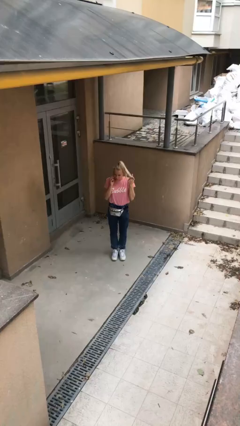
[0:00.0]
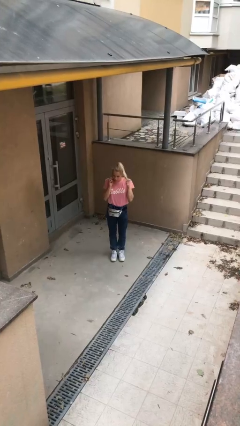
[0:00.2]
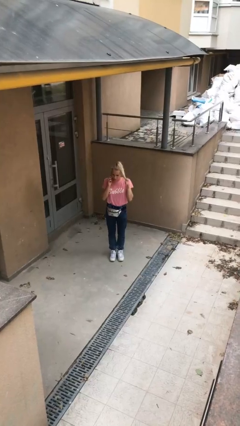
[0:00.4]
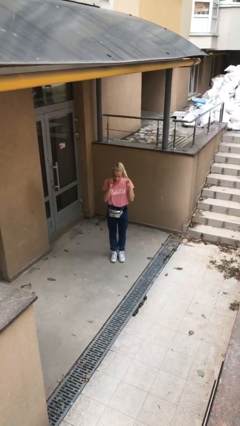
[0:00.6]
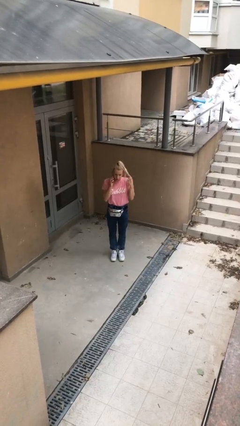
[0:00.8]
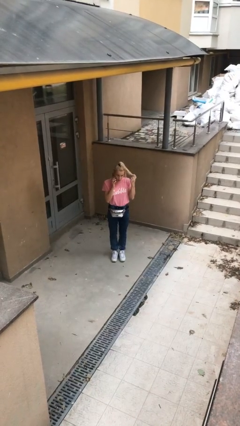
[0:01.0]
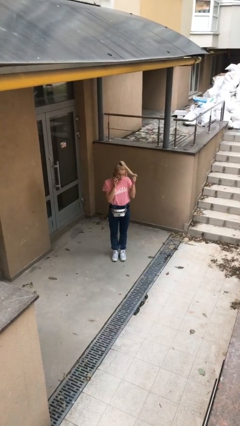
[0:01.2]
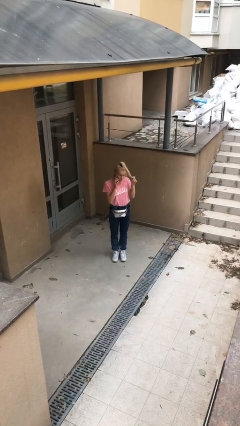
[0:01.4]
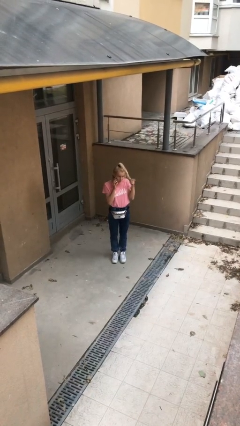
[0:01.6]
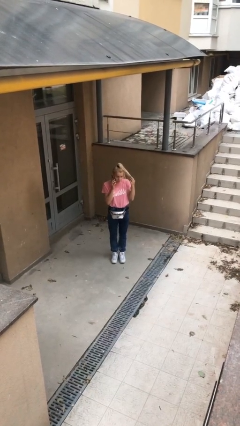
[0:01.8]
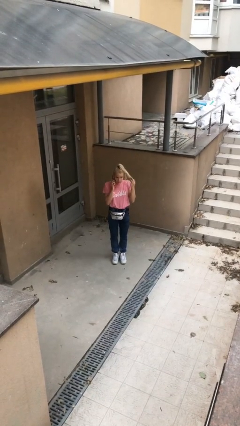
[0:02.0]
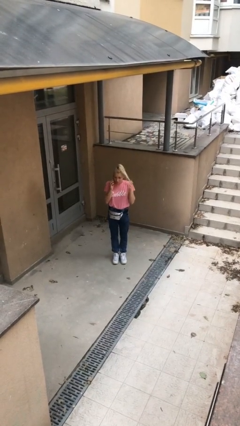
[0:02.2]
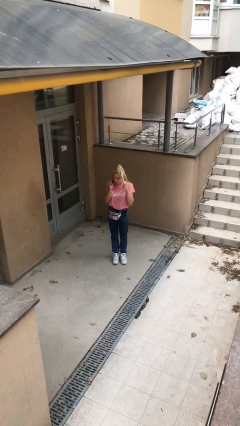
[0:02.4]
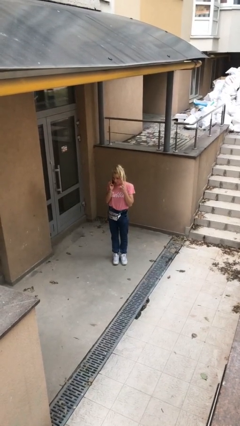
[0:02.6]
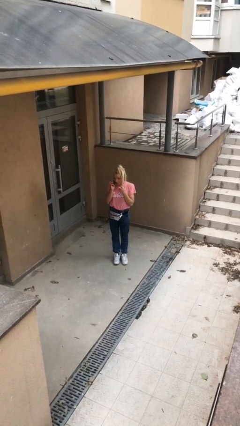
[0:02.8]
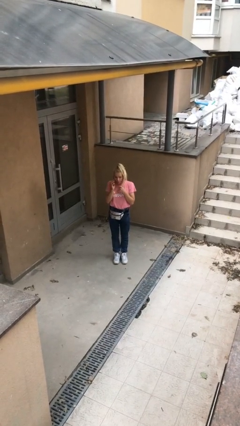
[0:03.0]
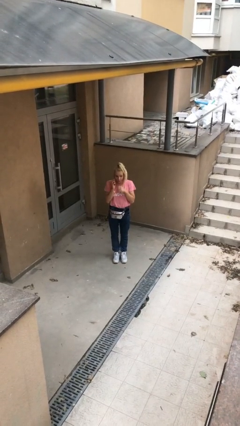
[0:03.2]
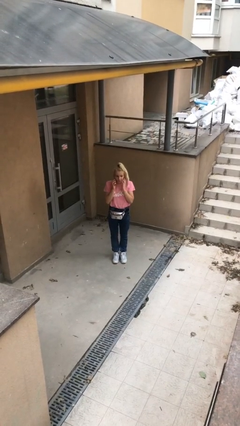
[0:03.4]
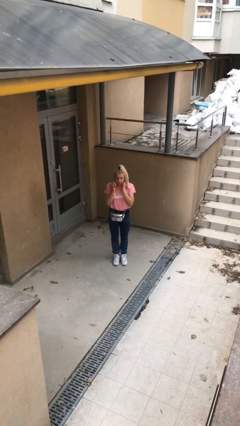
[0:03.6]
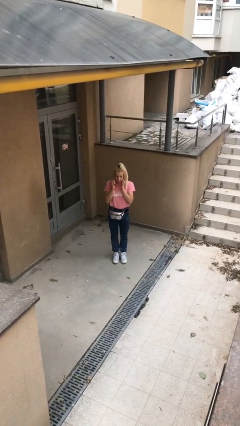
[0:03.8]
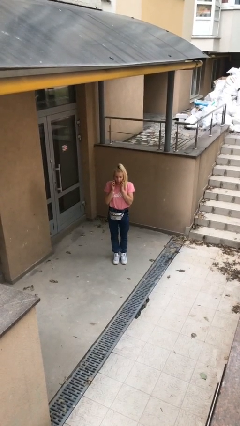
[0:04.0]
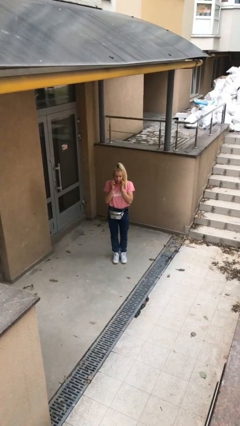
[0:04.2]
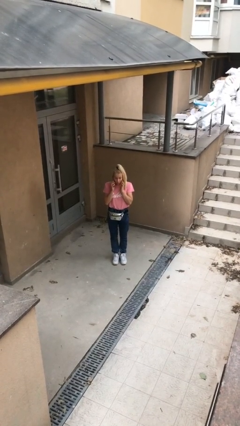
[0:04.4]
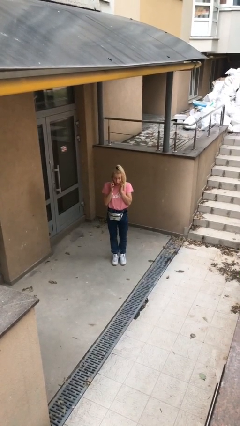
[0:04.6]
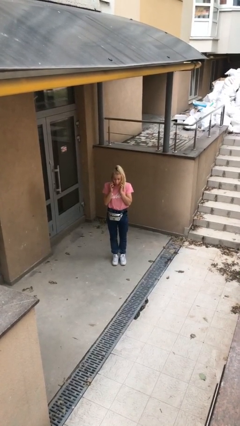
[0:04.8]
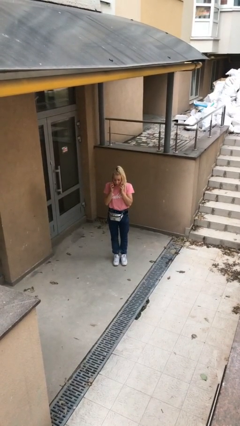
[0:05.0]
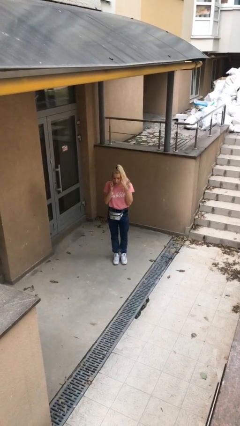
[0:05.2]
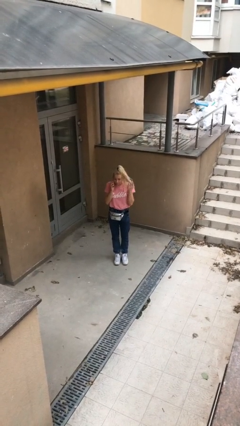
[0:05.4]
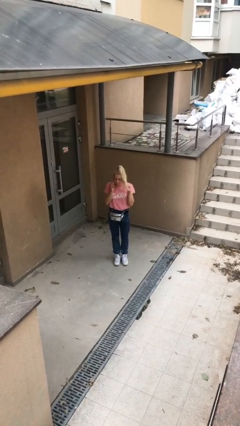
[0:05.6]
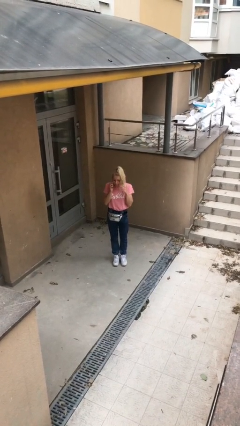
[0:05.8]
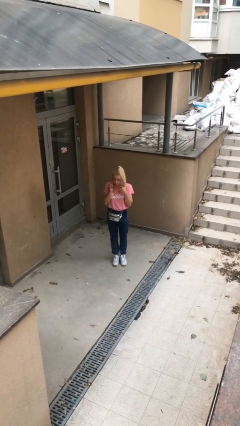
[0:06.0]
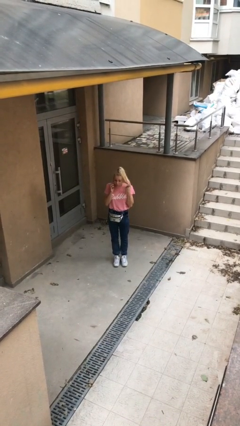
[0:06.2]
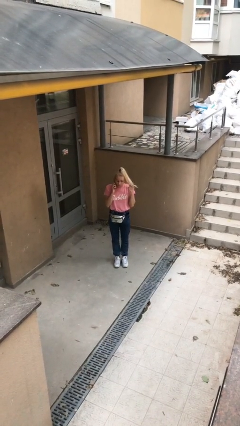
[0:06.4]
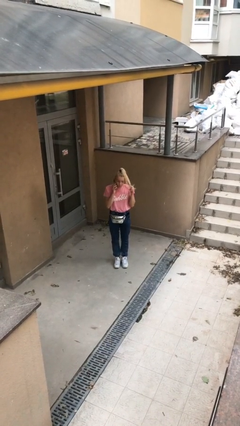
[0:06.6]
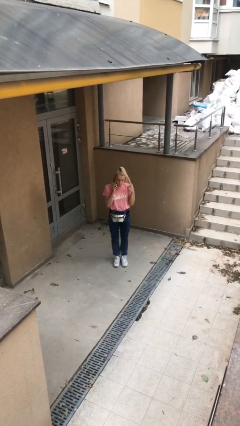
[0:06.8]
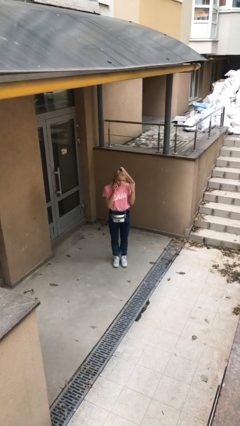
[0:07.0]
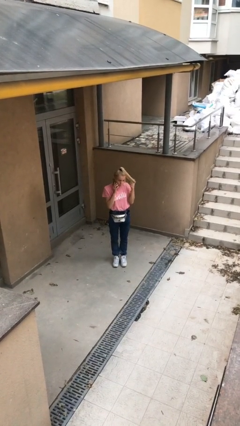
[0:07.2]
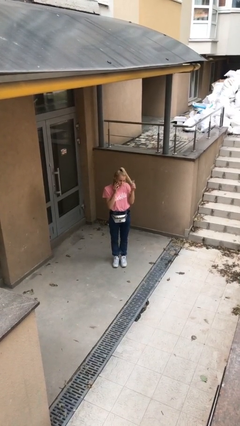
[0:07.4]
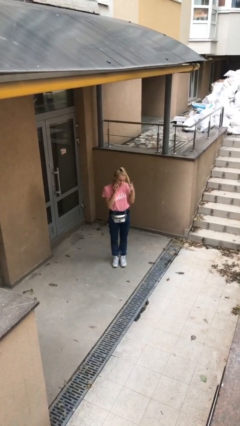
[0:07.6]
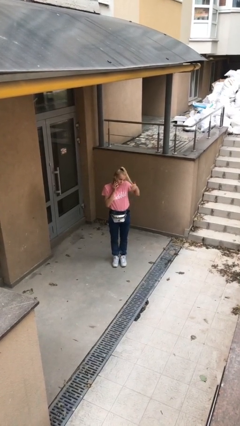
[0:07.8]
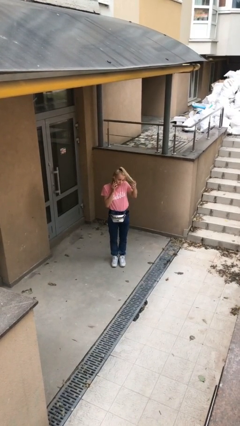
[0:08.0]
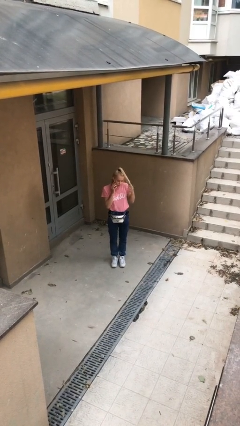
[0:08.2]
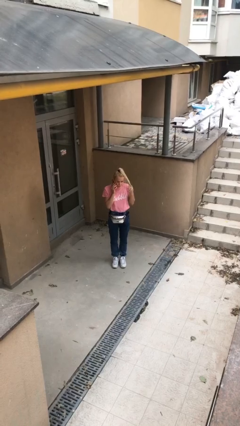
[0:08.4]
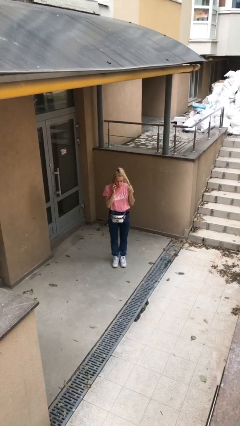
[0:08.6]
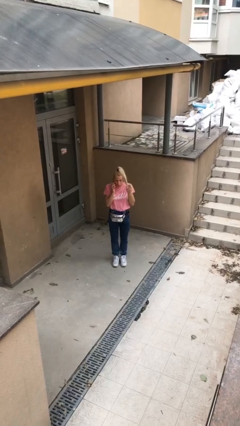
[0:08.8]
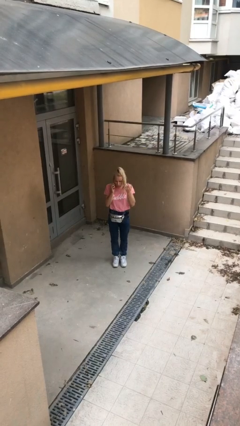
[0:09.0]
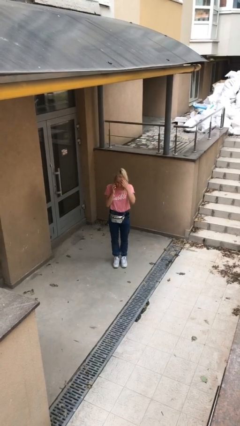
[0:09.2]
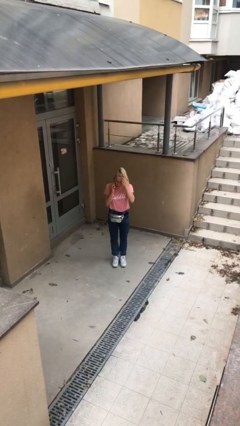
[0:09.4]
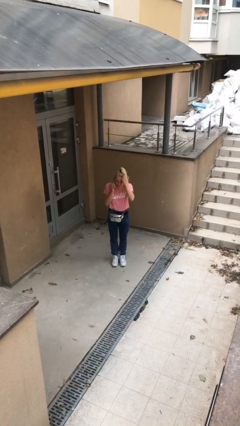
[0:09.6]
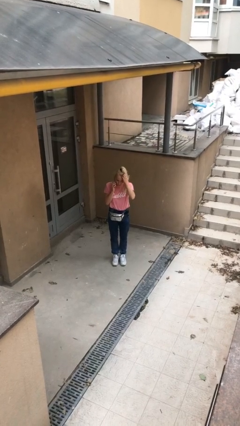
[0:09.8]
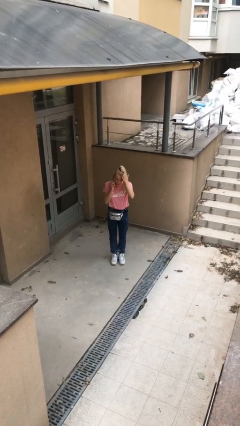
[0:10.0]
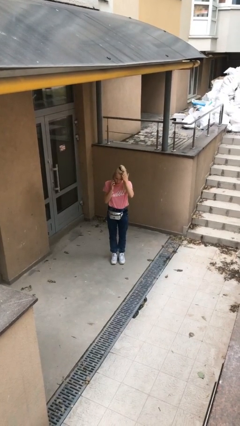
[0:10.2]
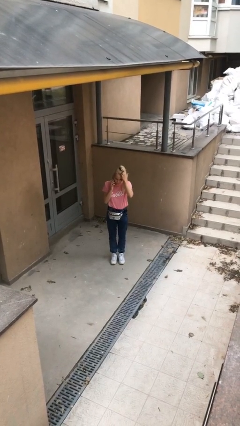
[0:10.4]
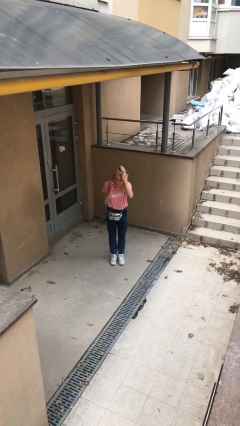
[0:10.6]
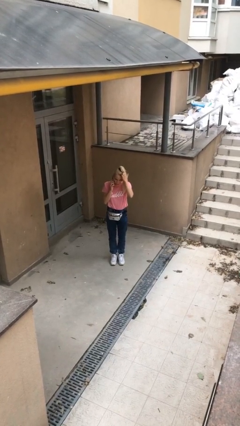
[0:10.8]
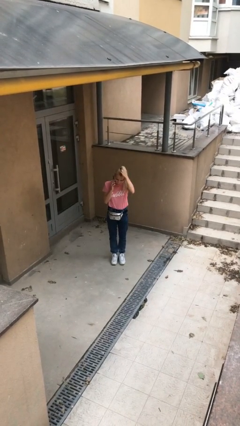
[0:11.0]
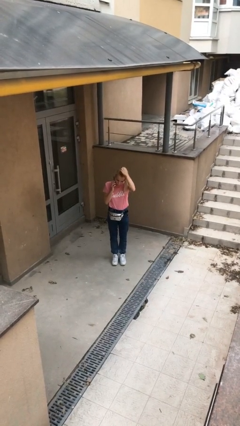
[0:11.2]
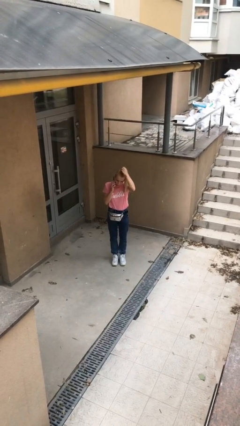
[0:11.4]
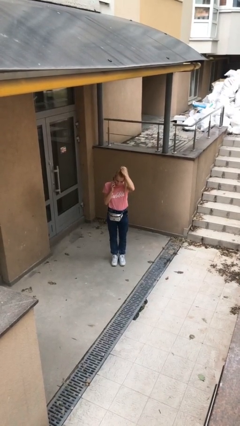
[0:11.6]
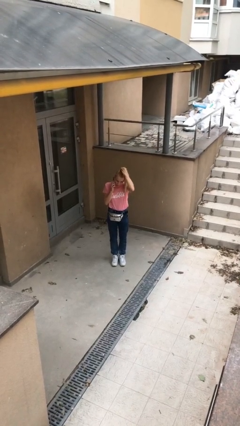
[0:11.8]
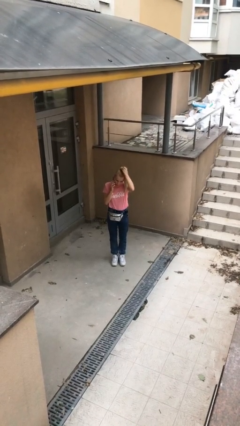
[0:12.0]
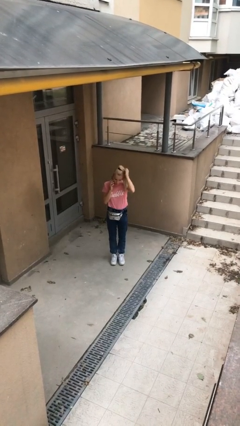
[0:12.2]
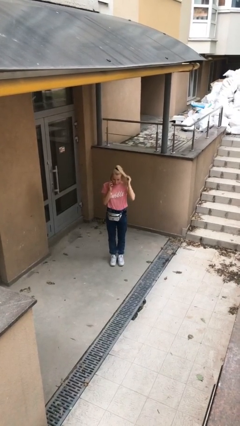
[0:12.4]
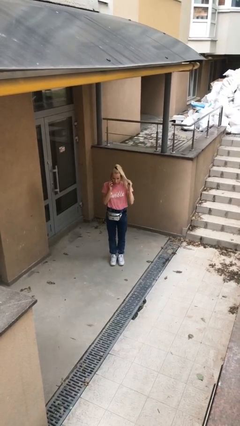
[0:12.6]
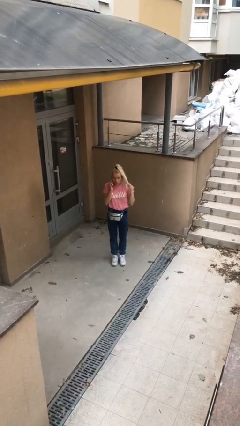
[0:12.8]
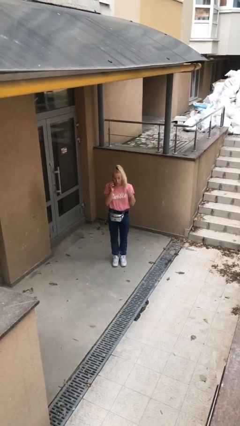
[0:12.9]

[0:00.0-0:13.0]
person talks on phone

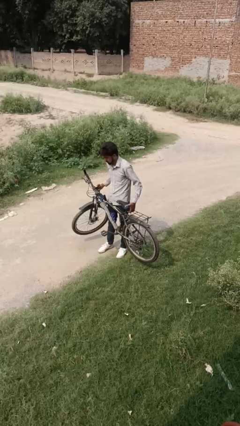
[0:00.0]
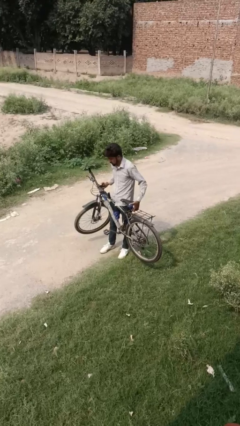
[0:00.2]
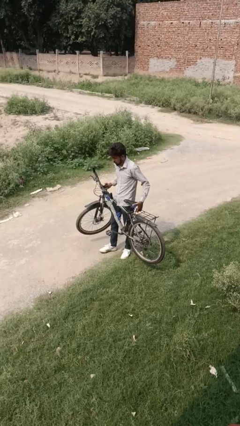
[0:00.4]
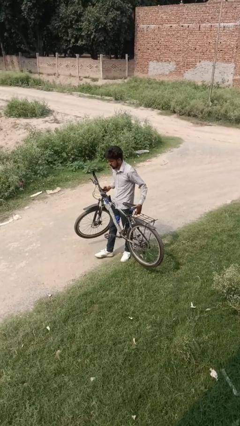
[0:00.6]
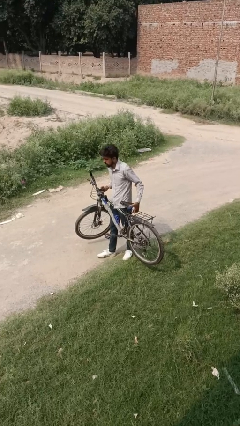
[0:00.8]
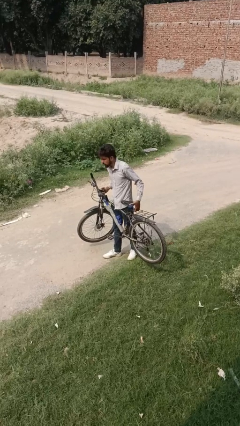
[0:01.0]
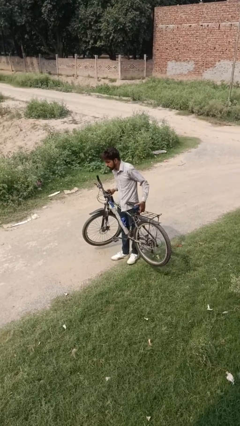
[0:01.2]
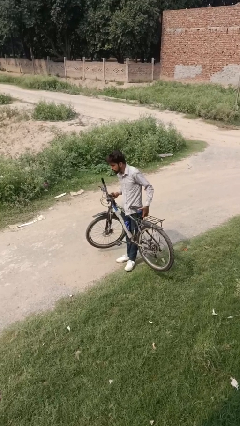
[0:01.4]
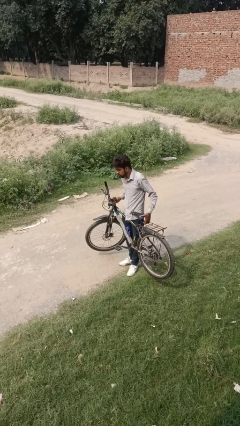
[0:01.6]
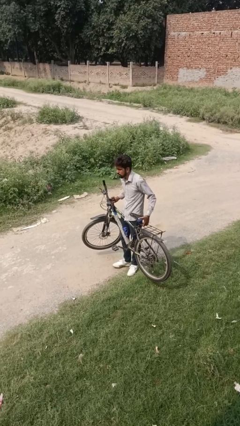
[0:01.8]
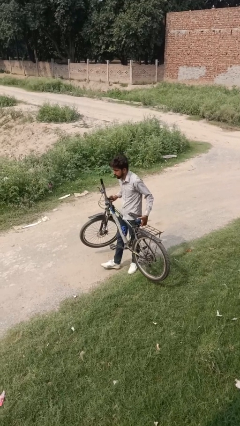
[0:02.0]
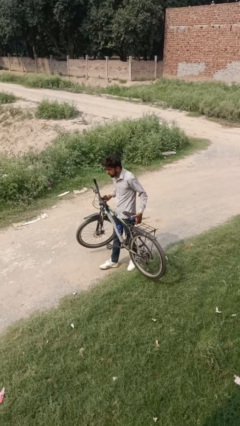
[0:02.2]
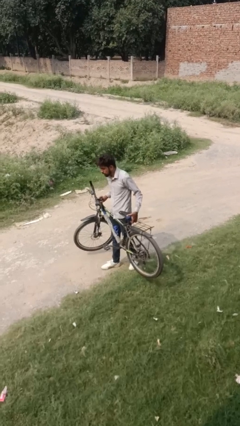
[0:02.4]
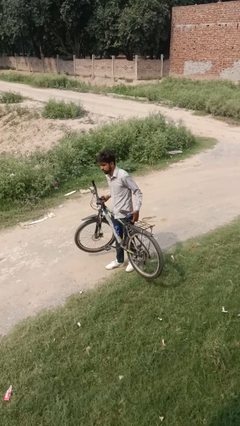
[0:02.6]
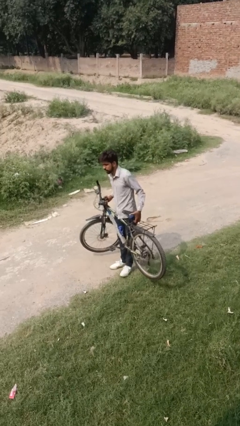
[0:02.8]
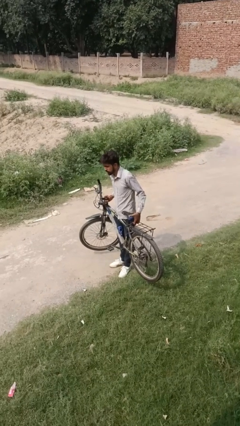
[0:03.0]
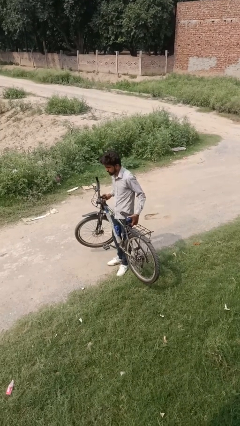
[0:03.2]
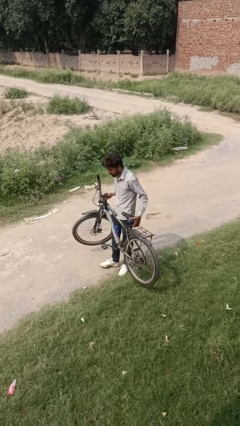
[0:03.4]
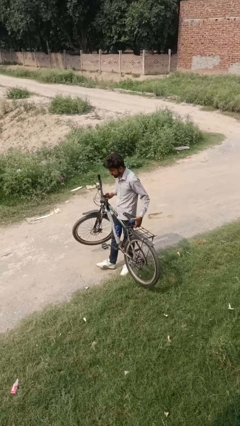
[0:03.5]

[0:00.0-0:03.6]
person carries bicycle

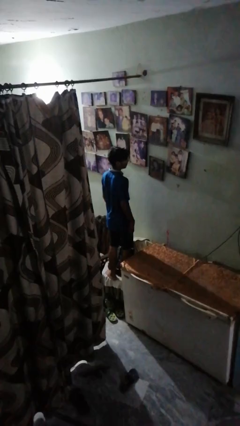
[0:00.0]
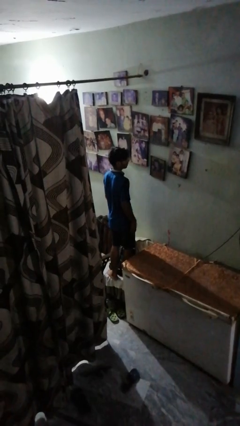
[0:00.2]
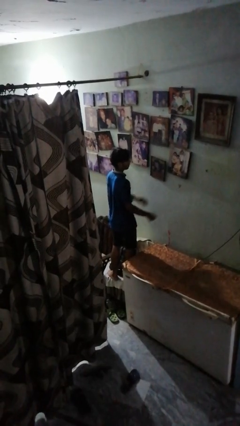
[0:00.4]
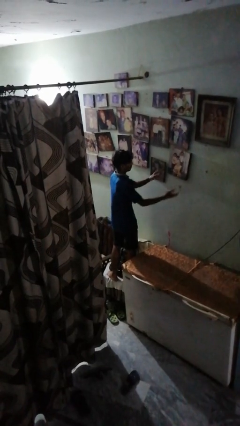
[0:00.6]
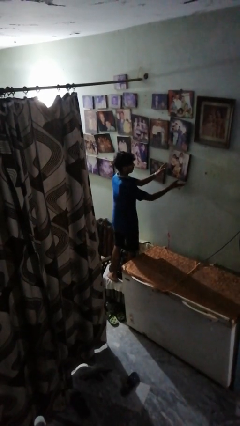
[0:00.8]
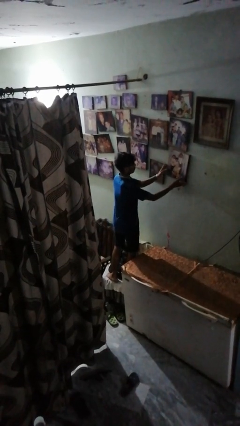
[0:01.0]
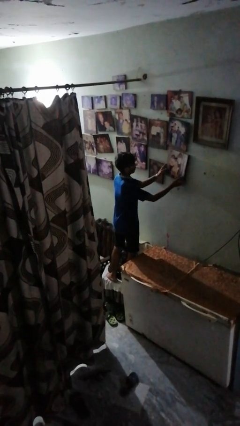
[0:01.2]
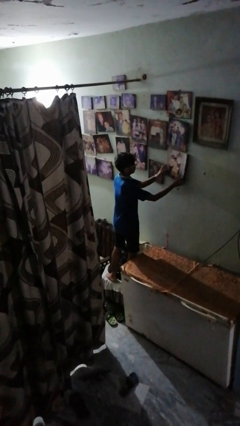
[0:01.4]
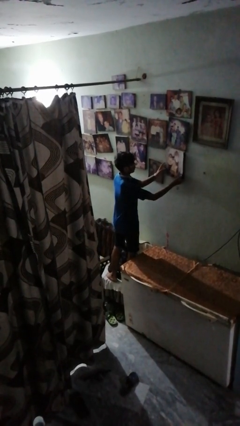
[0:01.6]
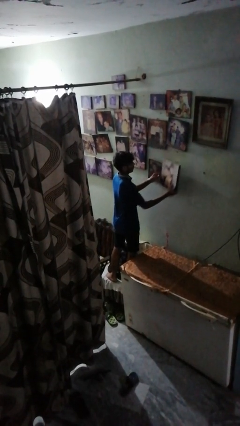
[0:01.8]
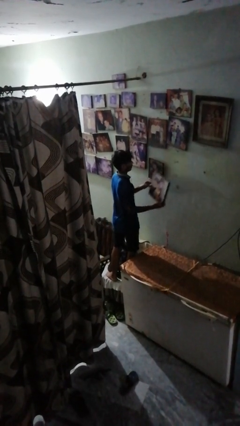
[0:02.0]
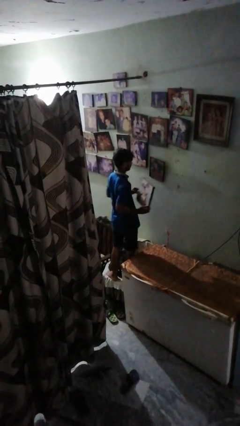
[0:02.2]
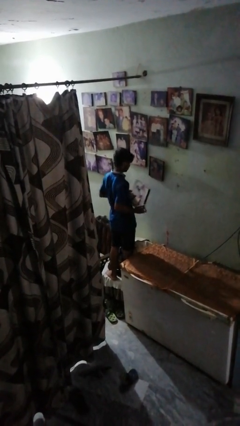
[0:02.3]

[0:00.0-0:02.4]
person takes down picture frame
